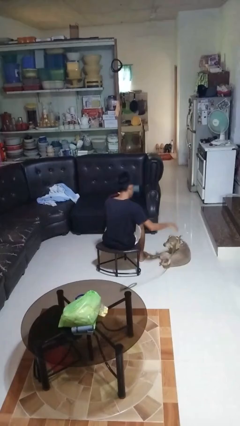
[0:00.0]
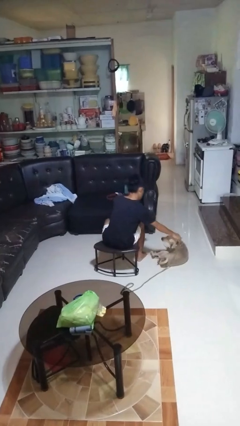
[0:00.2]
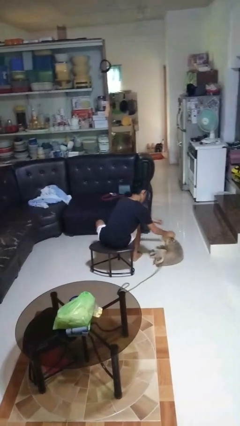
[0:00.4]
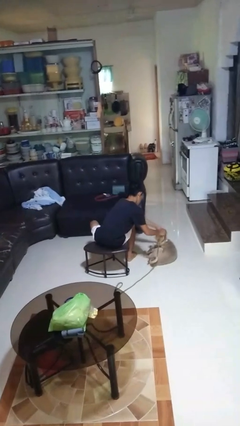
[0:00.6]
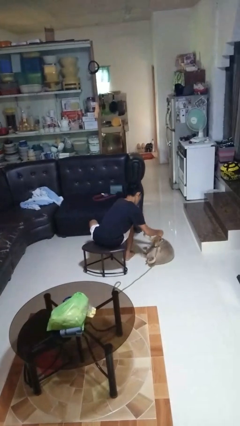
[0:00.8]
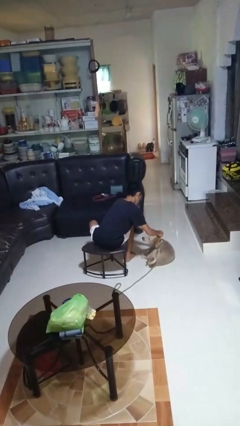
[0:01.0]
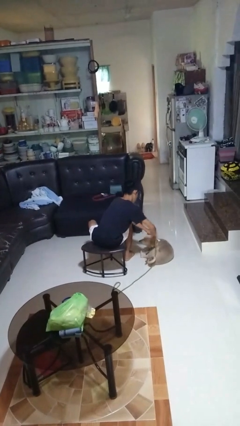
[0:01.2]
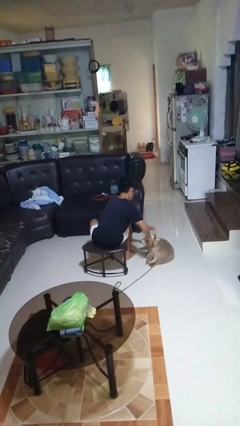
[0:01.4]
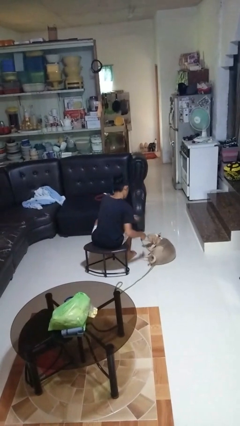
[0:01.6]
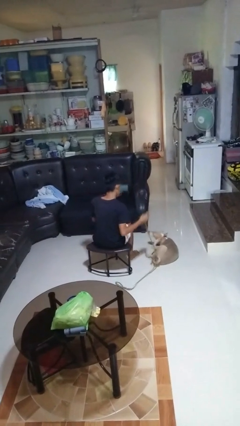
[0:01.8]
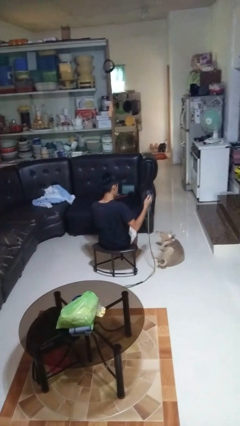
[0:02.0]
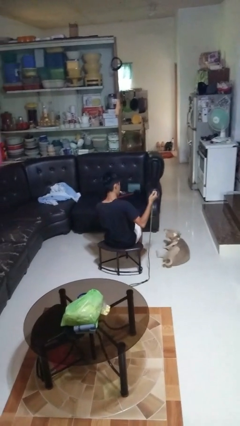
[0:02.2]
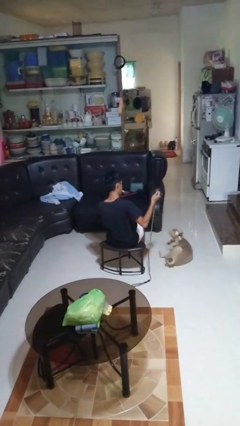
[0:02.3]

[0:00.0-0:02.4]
person unattaches leash from dog

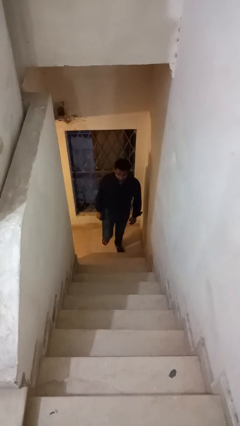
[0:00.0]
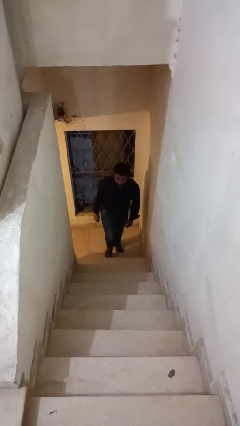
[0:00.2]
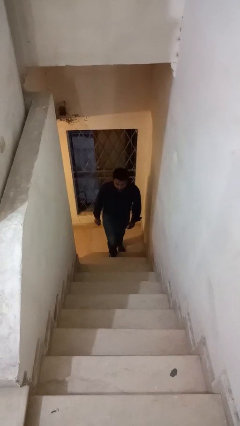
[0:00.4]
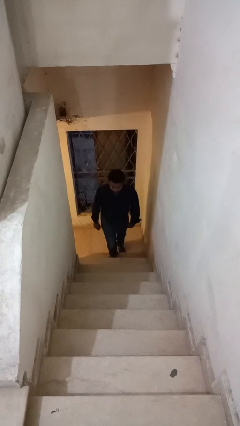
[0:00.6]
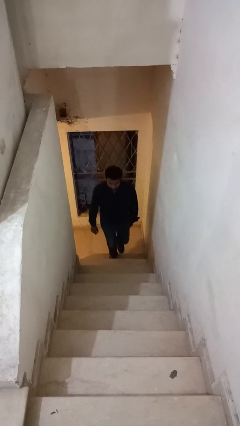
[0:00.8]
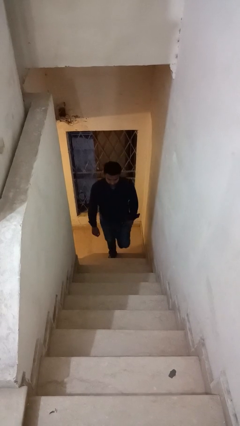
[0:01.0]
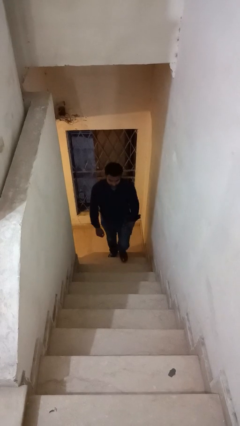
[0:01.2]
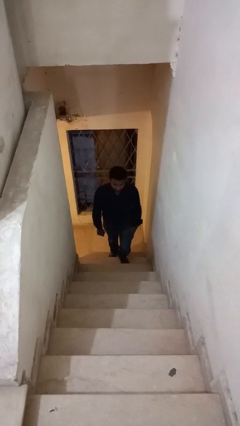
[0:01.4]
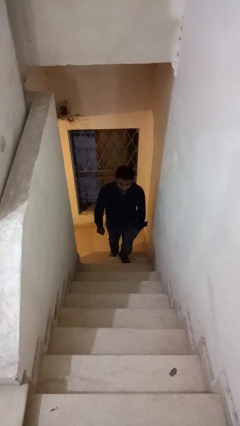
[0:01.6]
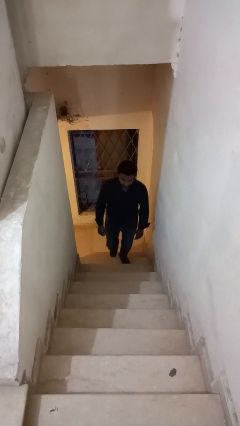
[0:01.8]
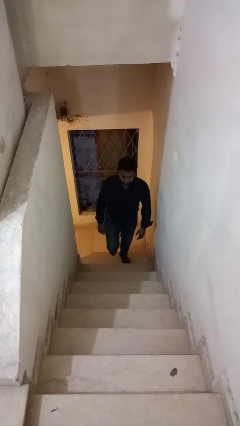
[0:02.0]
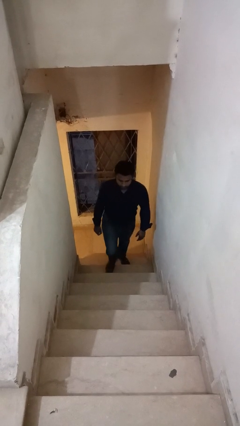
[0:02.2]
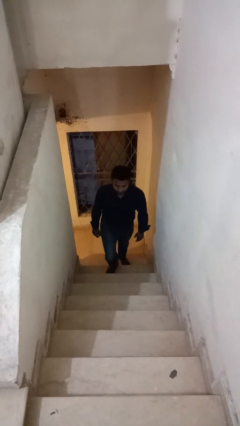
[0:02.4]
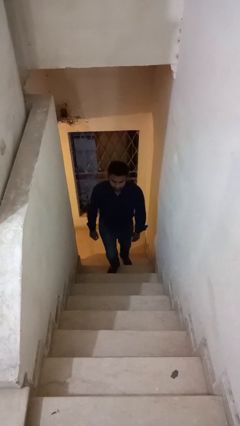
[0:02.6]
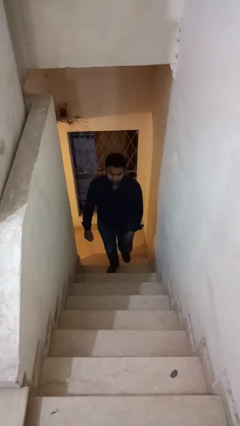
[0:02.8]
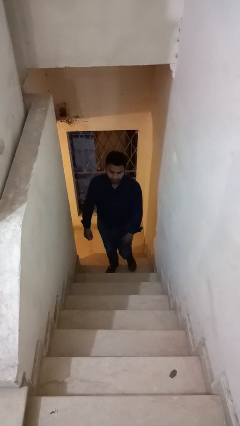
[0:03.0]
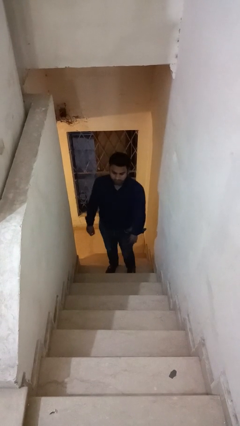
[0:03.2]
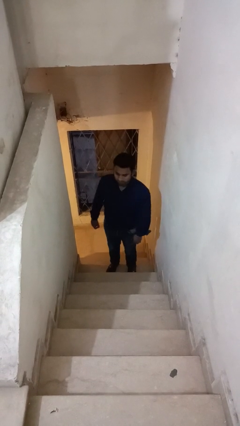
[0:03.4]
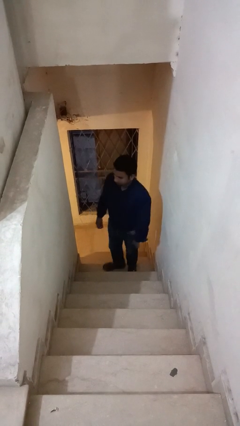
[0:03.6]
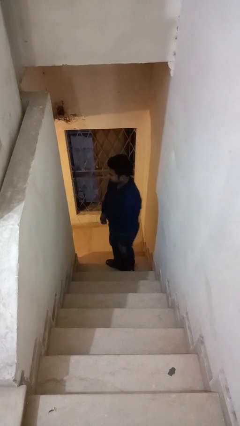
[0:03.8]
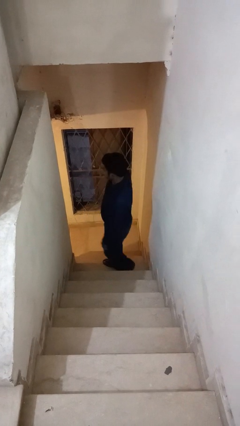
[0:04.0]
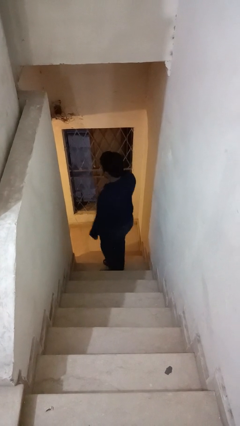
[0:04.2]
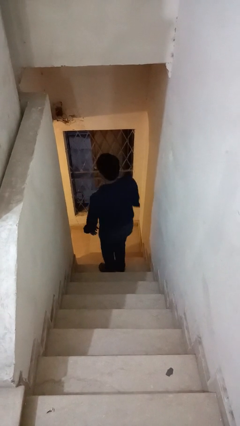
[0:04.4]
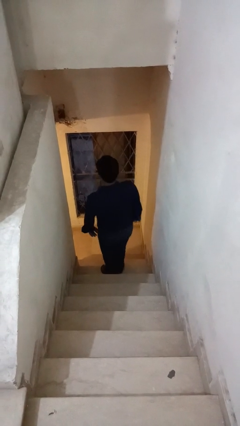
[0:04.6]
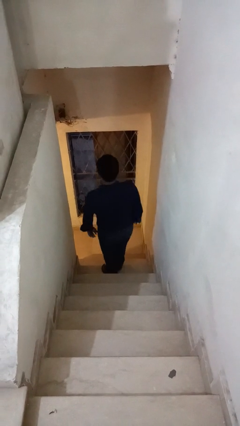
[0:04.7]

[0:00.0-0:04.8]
person climbs up stairs

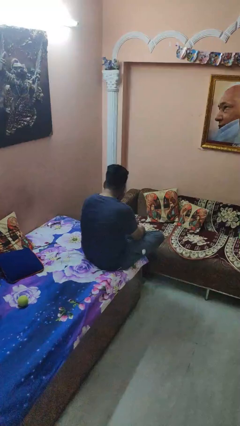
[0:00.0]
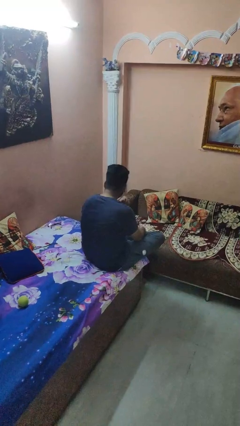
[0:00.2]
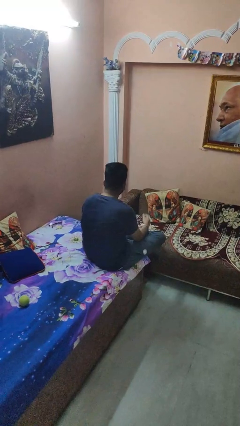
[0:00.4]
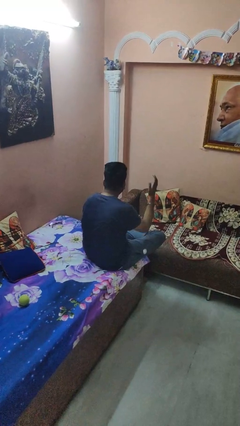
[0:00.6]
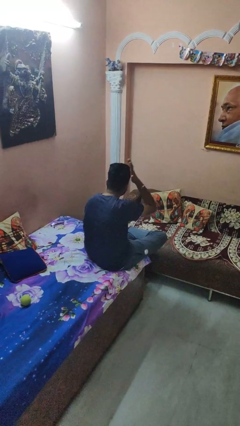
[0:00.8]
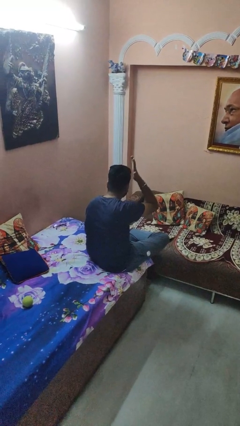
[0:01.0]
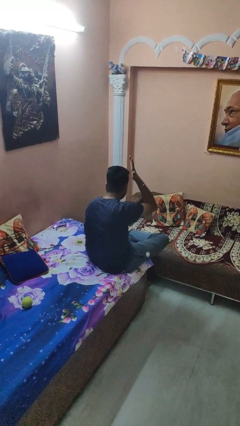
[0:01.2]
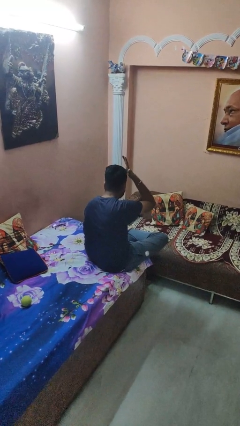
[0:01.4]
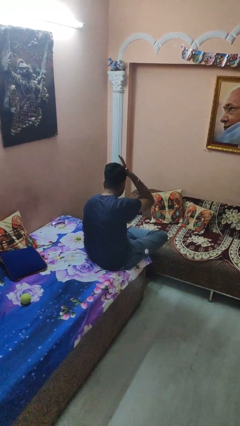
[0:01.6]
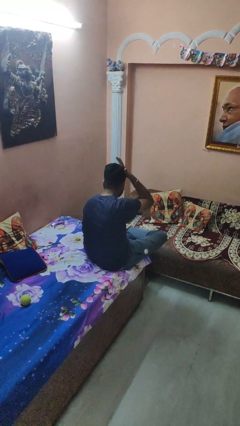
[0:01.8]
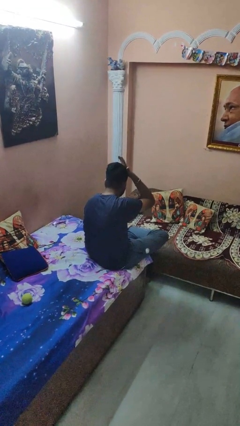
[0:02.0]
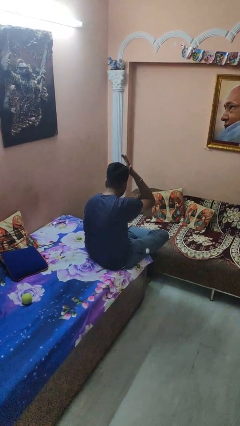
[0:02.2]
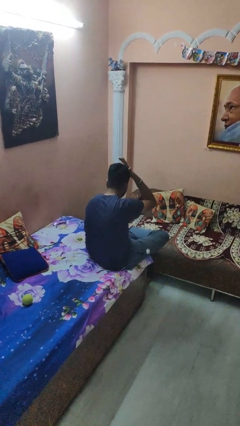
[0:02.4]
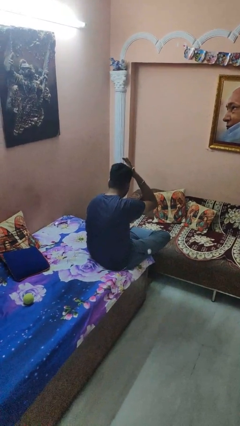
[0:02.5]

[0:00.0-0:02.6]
person pats head

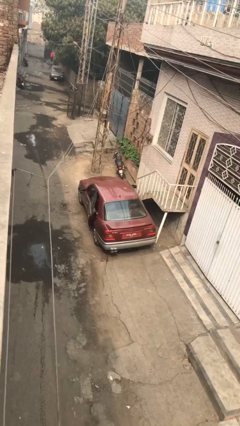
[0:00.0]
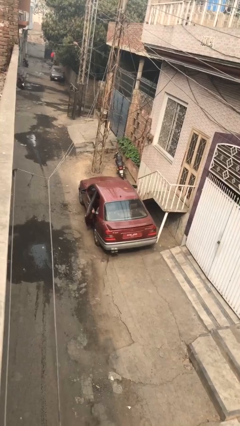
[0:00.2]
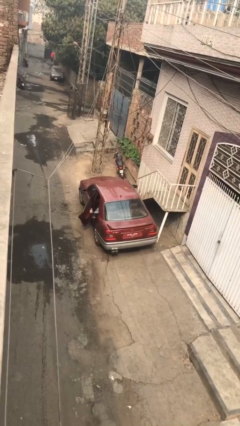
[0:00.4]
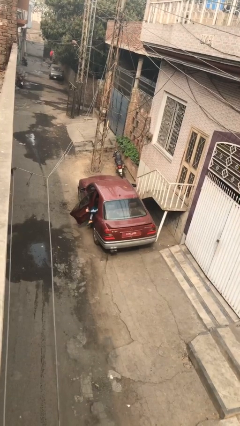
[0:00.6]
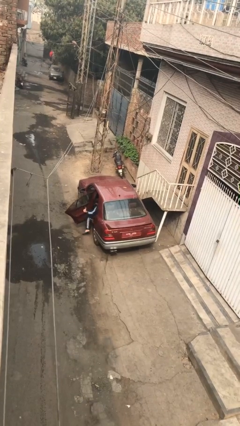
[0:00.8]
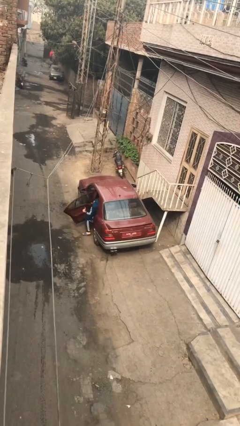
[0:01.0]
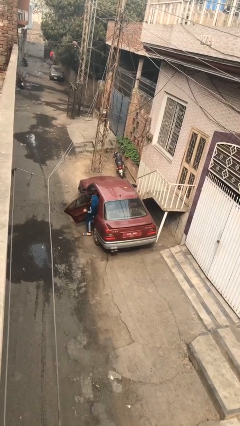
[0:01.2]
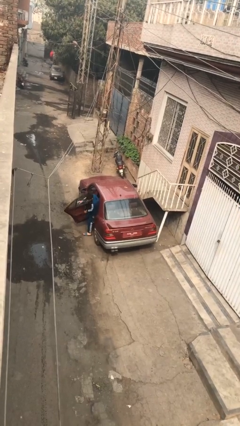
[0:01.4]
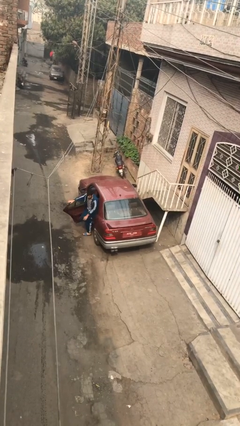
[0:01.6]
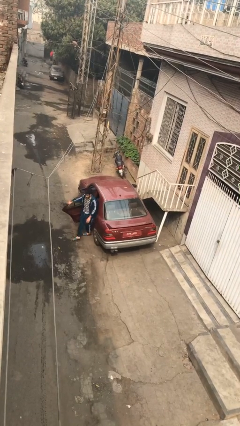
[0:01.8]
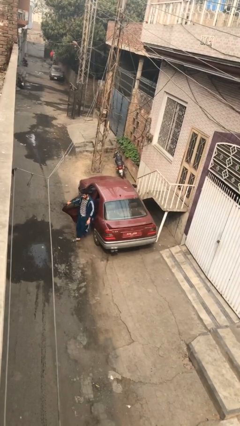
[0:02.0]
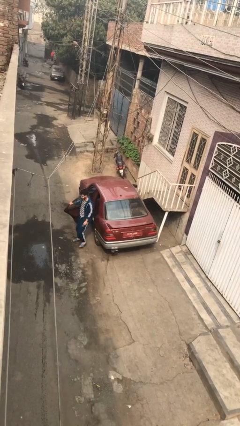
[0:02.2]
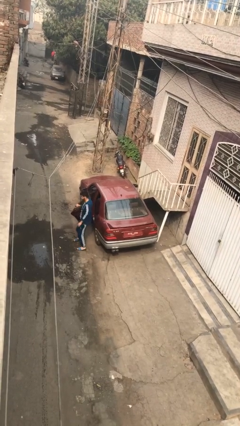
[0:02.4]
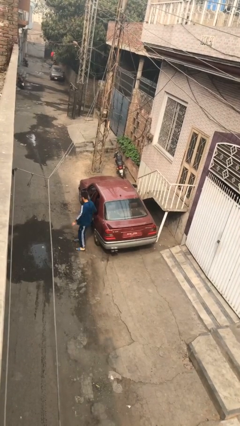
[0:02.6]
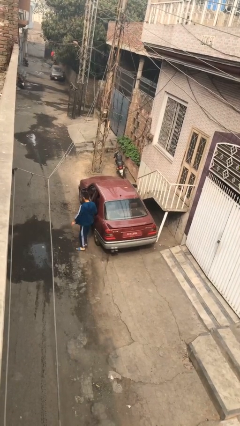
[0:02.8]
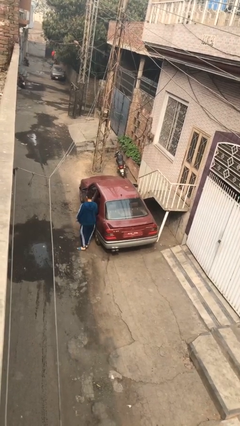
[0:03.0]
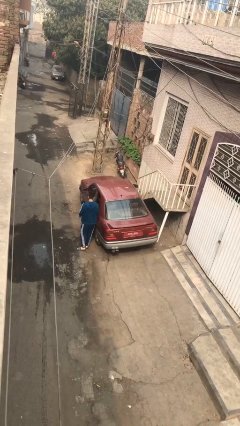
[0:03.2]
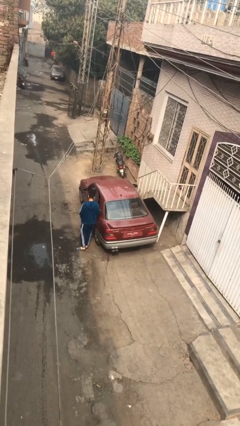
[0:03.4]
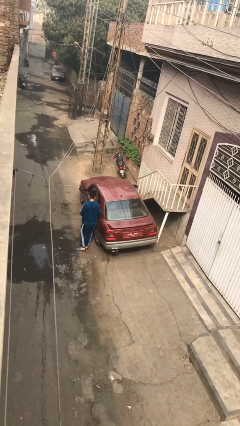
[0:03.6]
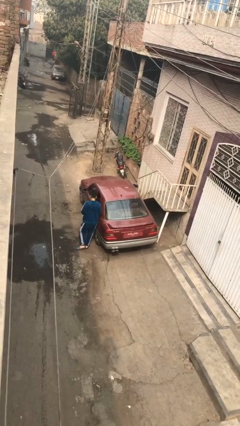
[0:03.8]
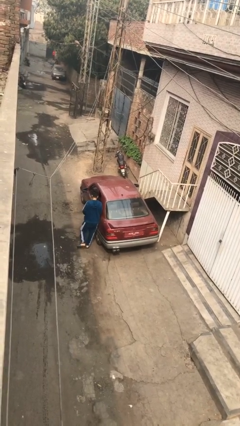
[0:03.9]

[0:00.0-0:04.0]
car drops off person

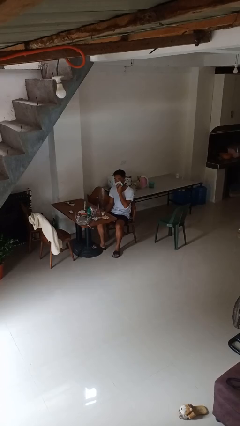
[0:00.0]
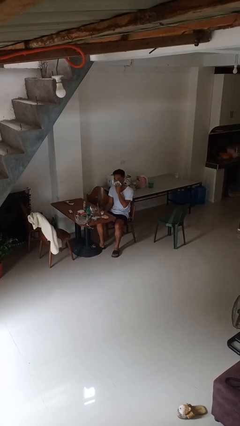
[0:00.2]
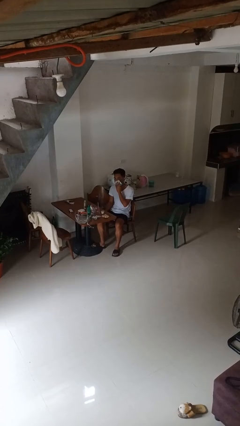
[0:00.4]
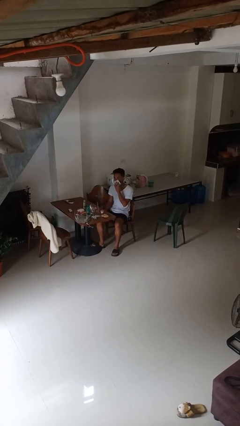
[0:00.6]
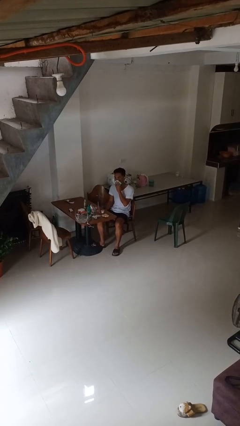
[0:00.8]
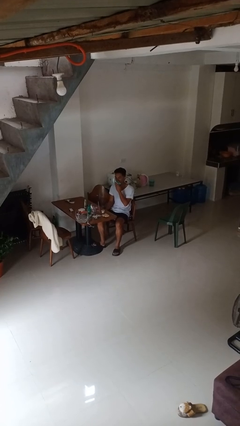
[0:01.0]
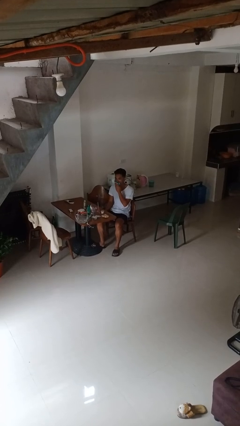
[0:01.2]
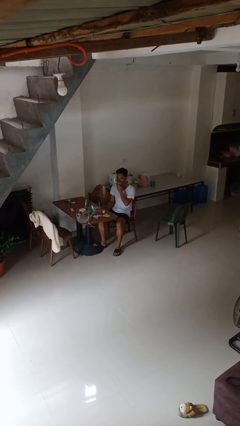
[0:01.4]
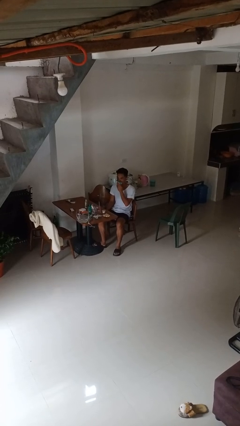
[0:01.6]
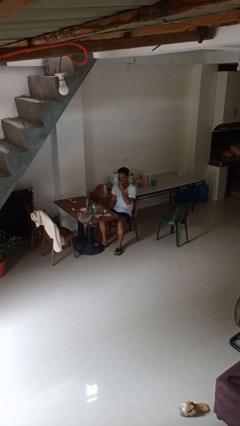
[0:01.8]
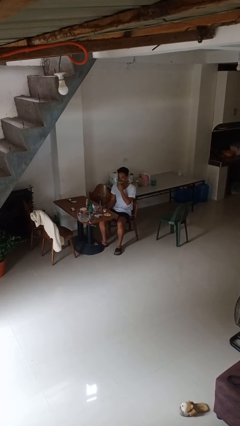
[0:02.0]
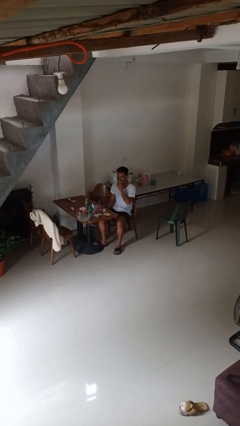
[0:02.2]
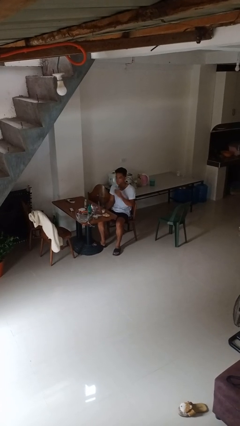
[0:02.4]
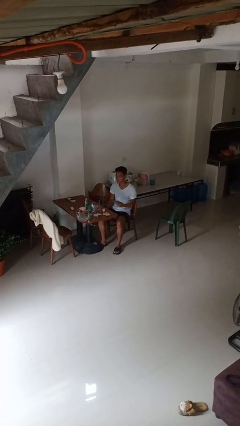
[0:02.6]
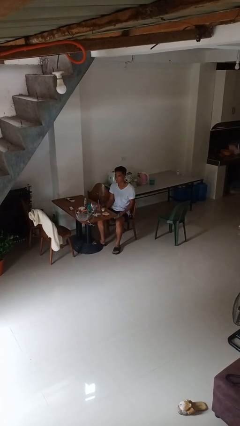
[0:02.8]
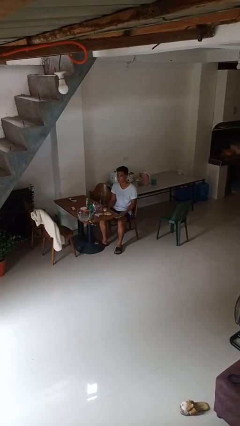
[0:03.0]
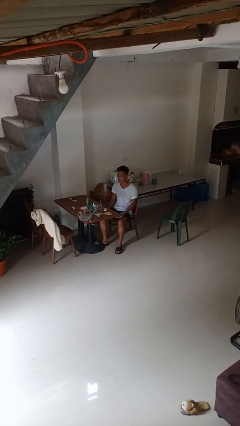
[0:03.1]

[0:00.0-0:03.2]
person wipes mouth with napkin

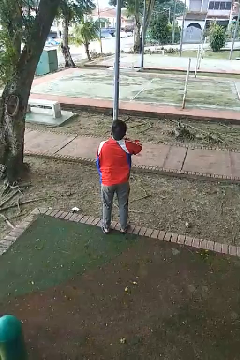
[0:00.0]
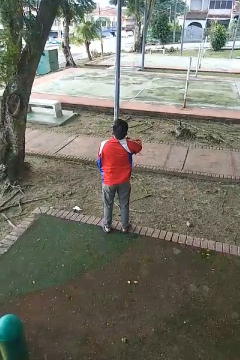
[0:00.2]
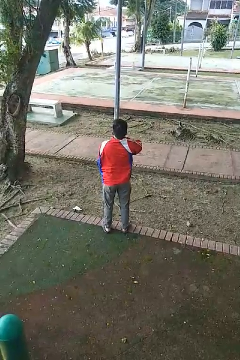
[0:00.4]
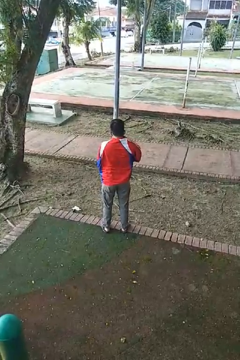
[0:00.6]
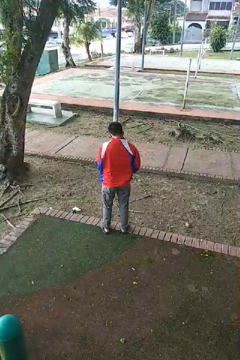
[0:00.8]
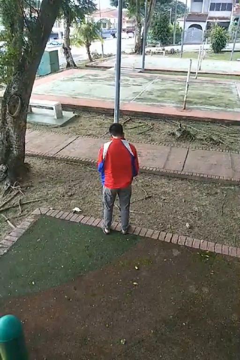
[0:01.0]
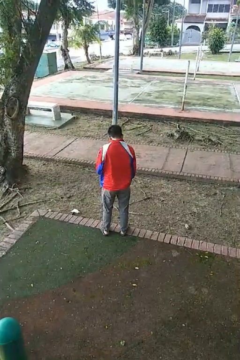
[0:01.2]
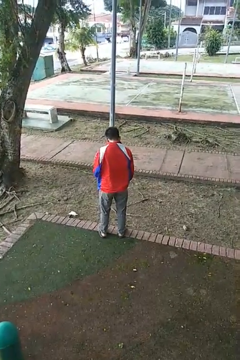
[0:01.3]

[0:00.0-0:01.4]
person unzips jacket
